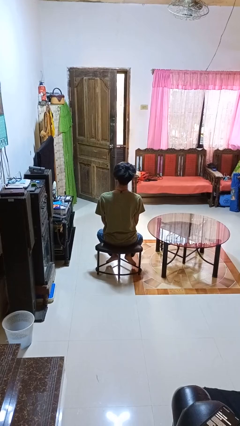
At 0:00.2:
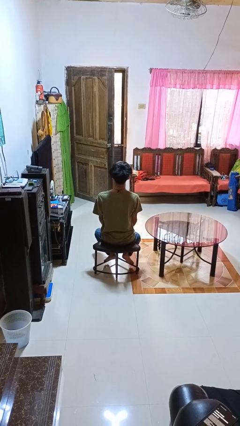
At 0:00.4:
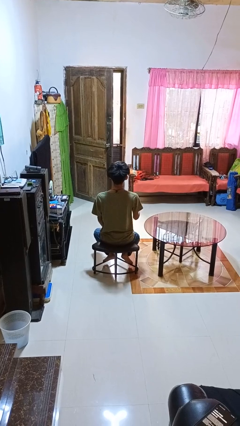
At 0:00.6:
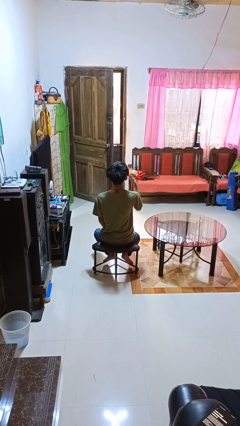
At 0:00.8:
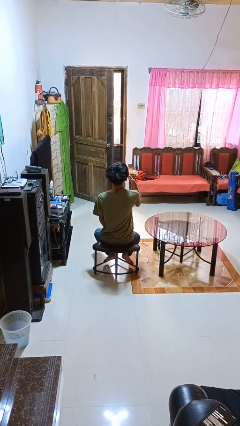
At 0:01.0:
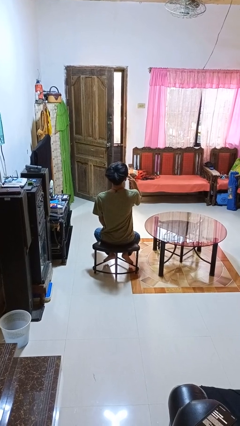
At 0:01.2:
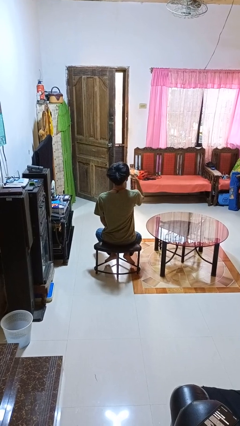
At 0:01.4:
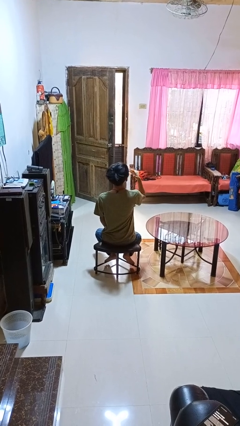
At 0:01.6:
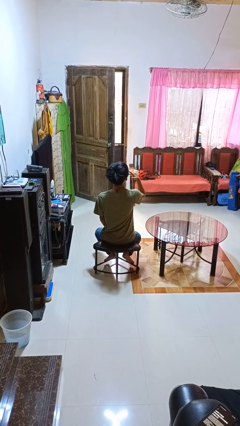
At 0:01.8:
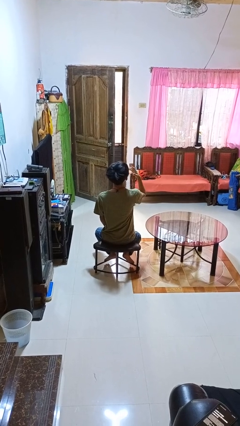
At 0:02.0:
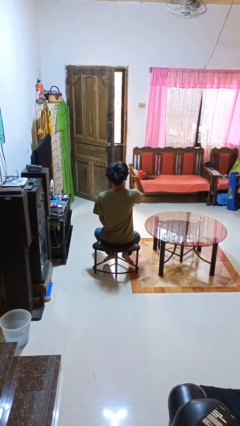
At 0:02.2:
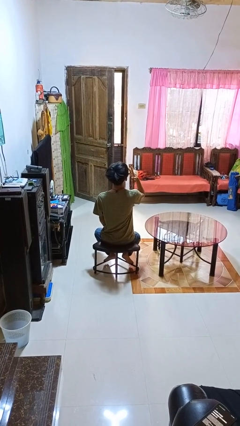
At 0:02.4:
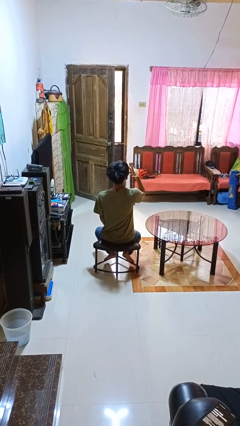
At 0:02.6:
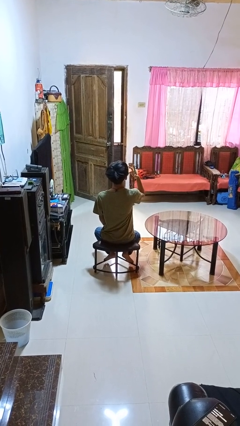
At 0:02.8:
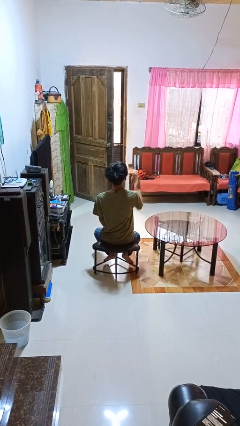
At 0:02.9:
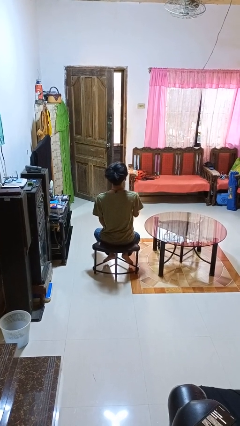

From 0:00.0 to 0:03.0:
person licks fingers

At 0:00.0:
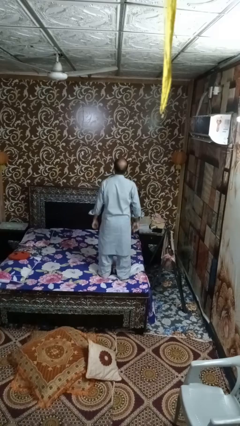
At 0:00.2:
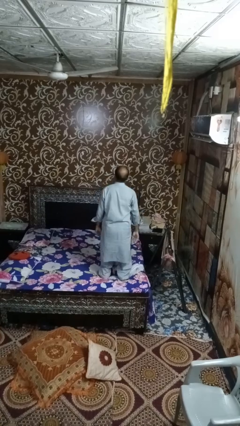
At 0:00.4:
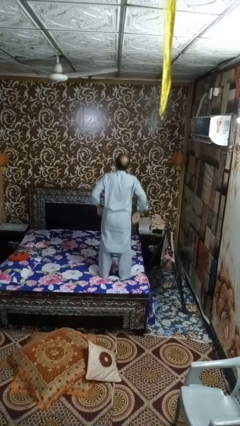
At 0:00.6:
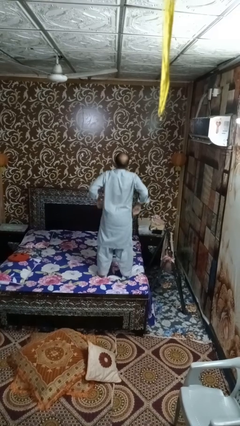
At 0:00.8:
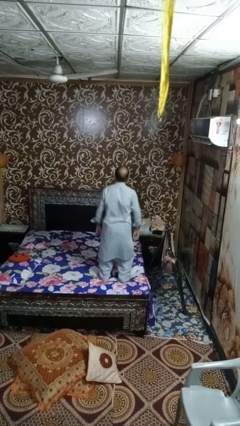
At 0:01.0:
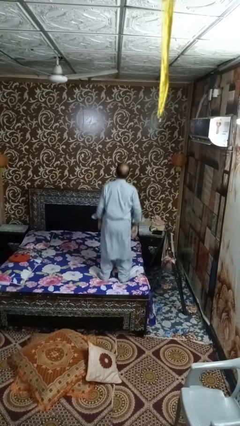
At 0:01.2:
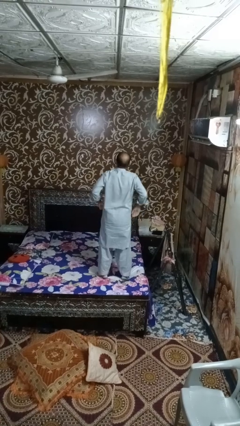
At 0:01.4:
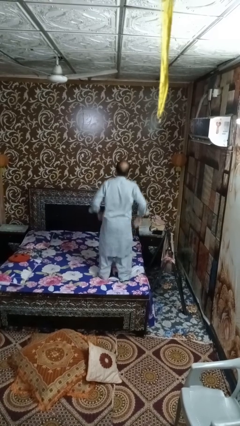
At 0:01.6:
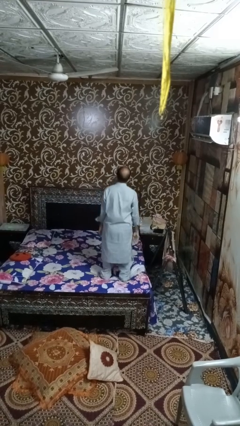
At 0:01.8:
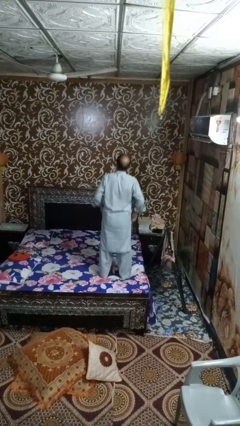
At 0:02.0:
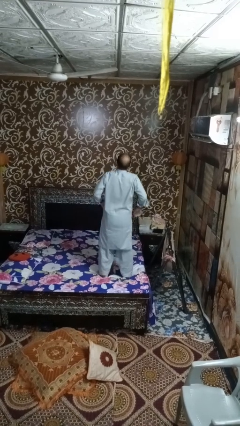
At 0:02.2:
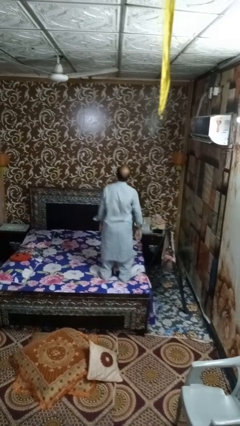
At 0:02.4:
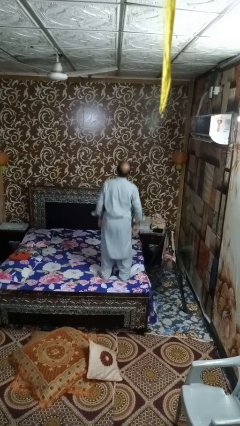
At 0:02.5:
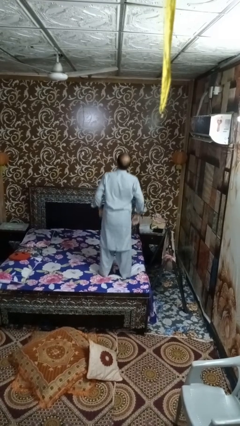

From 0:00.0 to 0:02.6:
person jumps on bed

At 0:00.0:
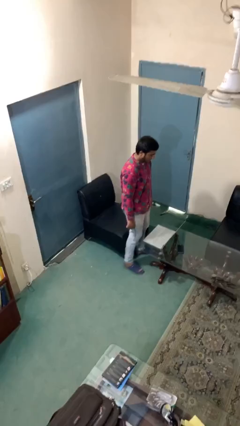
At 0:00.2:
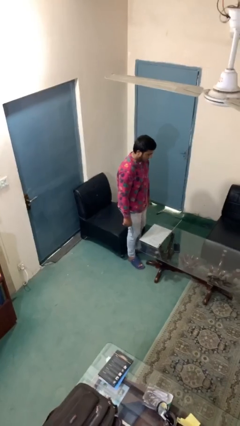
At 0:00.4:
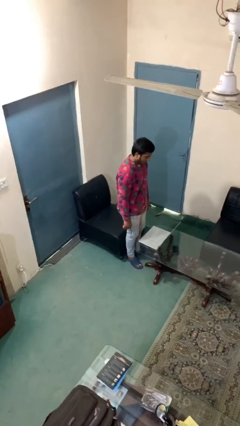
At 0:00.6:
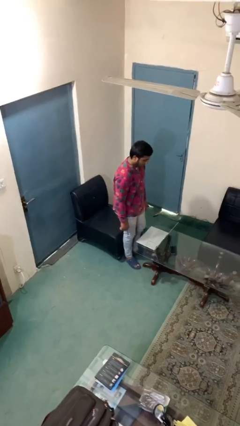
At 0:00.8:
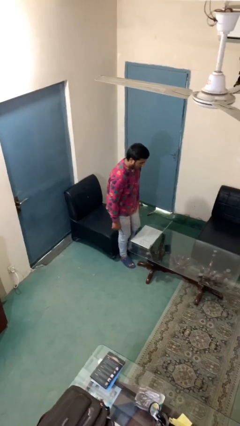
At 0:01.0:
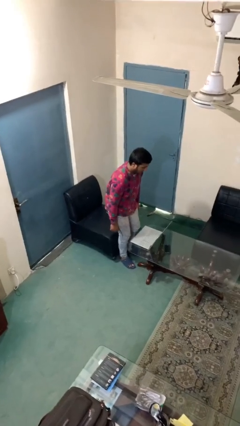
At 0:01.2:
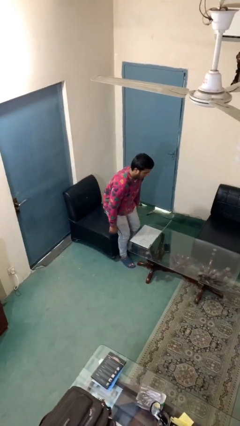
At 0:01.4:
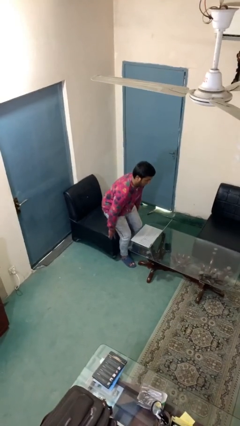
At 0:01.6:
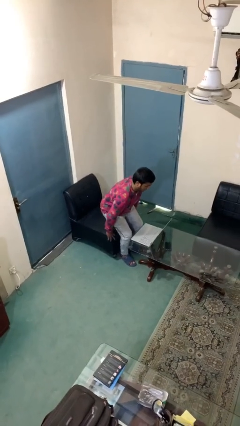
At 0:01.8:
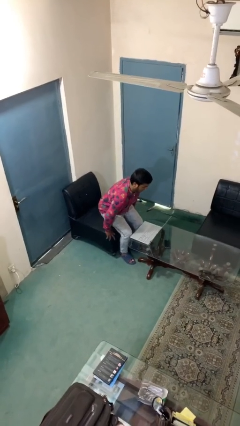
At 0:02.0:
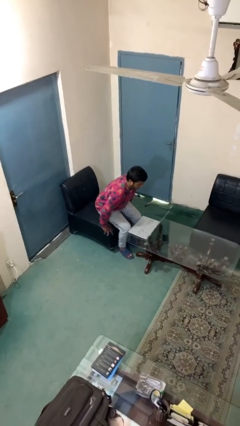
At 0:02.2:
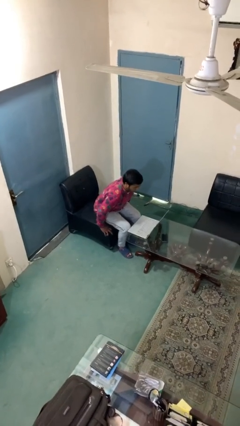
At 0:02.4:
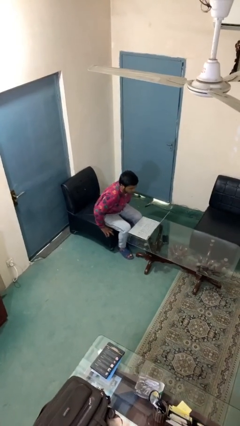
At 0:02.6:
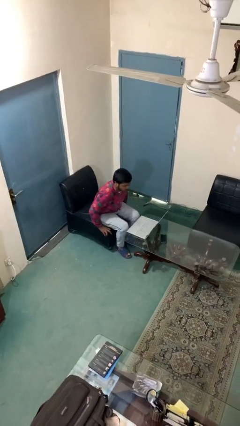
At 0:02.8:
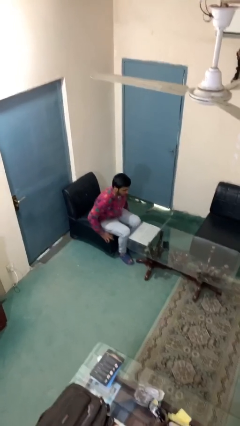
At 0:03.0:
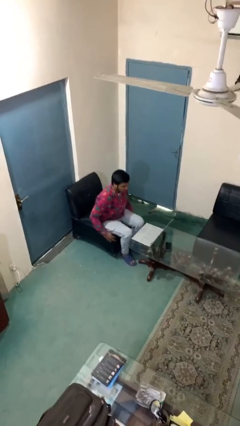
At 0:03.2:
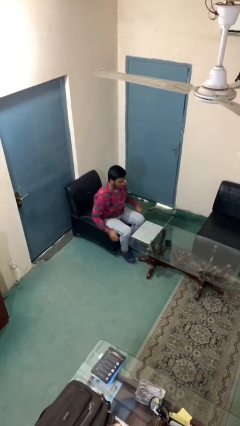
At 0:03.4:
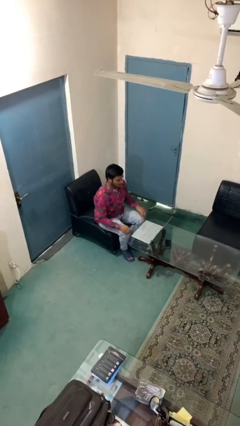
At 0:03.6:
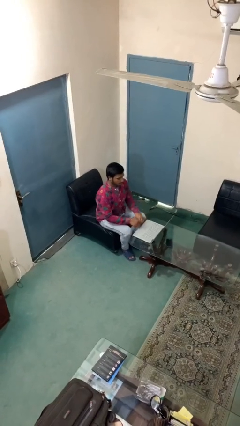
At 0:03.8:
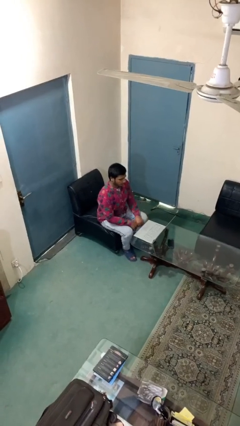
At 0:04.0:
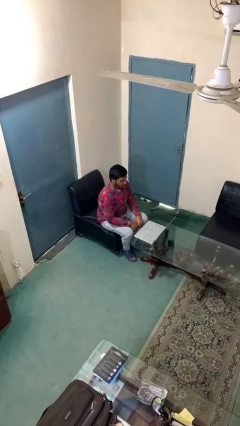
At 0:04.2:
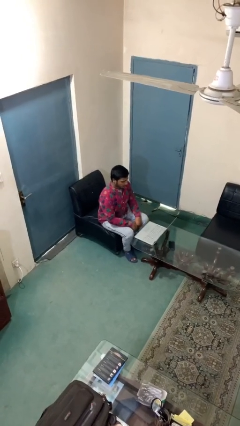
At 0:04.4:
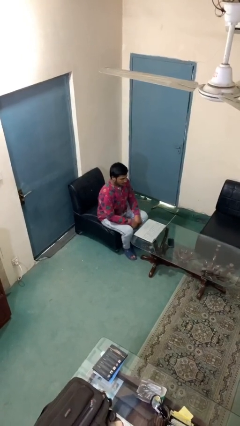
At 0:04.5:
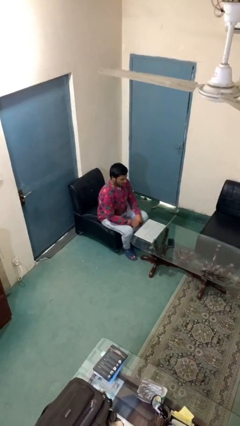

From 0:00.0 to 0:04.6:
person sits down

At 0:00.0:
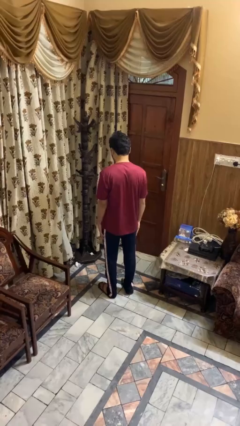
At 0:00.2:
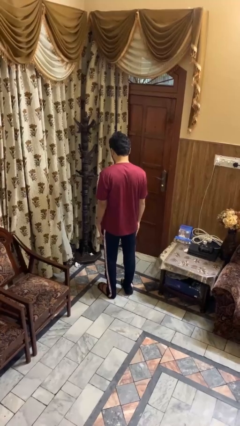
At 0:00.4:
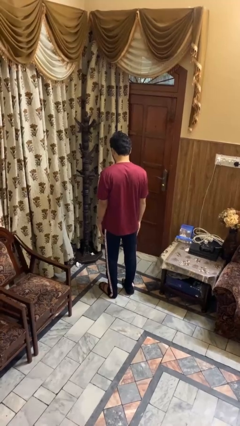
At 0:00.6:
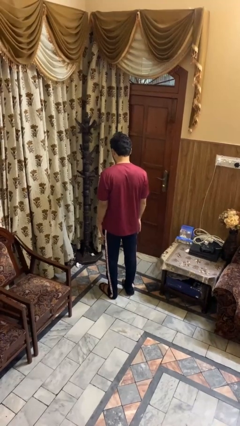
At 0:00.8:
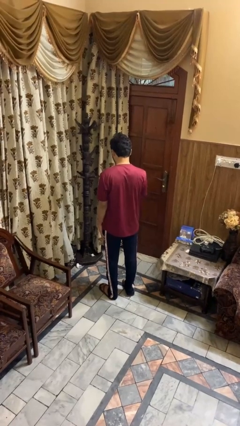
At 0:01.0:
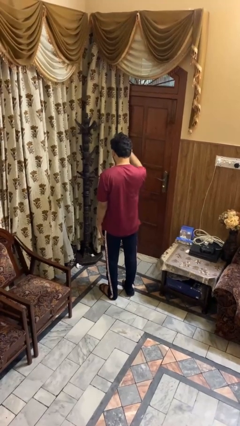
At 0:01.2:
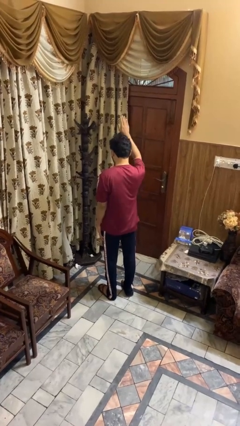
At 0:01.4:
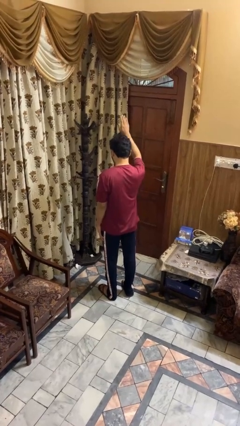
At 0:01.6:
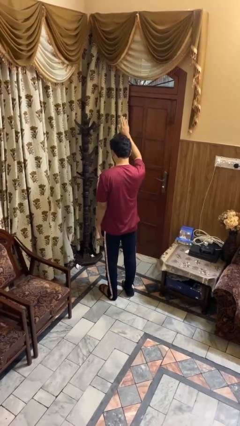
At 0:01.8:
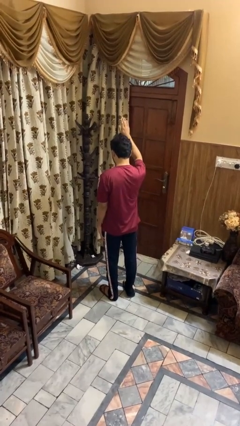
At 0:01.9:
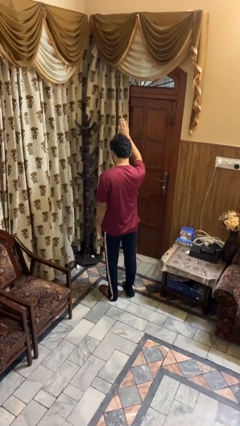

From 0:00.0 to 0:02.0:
person gestures raise hand

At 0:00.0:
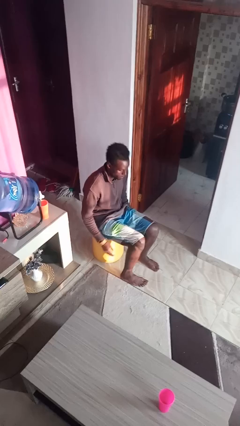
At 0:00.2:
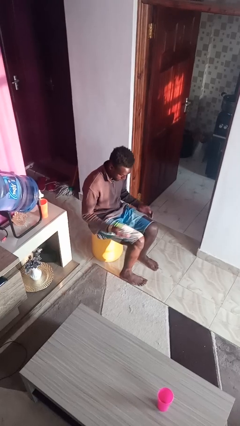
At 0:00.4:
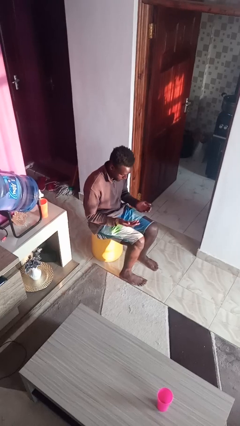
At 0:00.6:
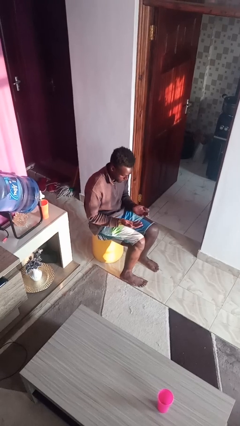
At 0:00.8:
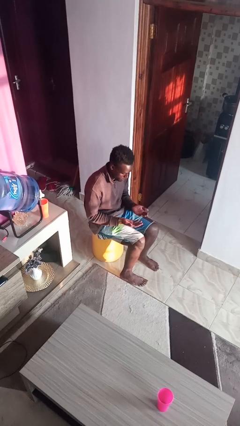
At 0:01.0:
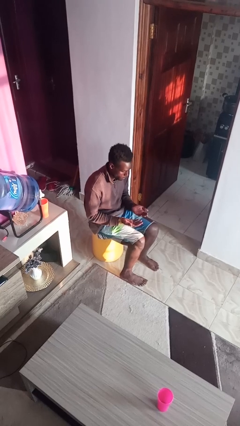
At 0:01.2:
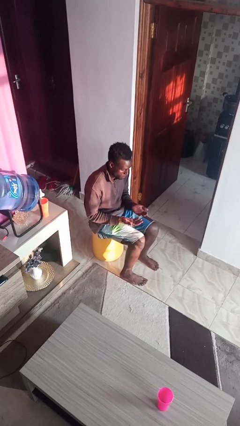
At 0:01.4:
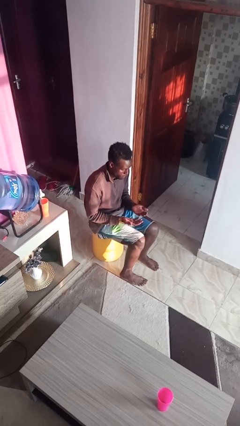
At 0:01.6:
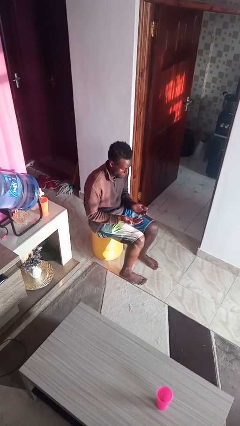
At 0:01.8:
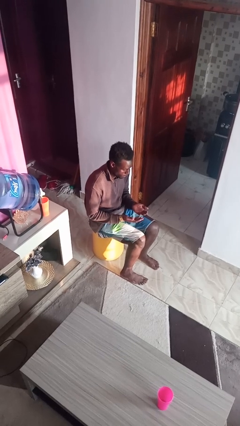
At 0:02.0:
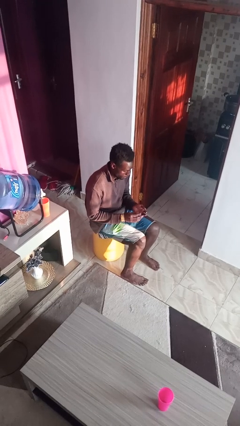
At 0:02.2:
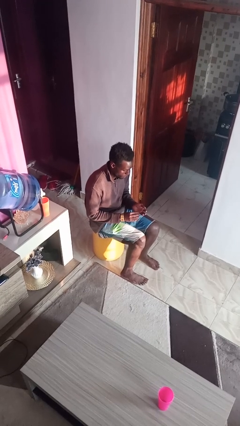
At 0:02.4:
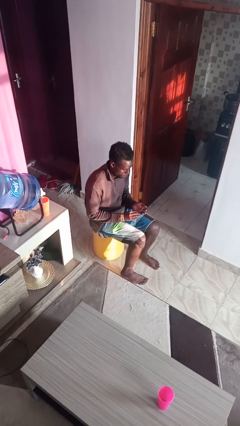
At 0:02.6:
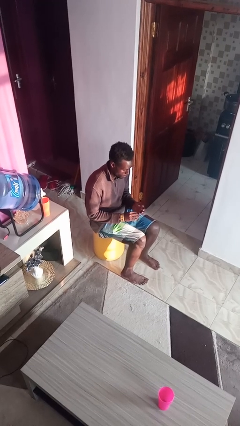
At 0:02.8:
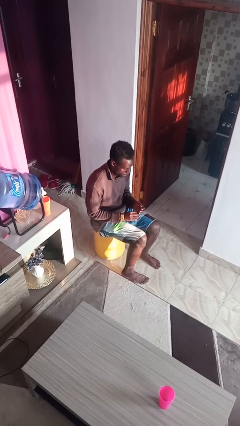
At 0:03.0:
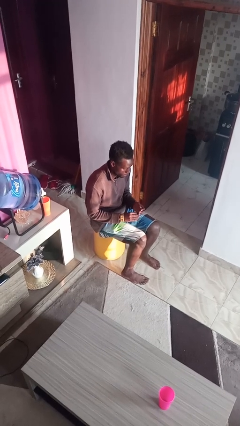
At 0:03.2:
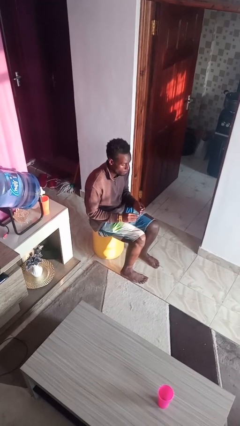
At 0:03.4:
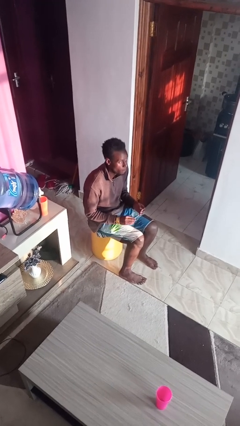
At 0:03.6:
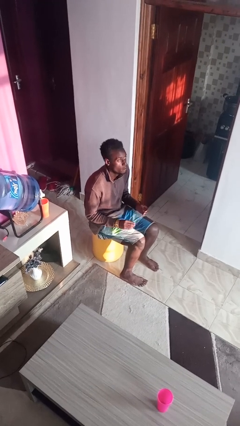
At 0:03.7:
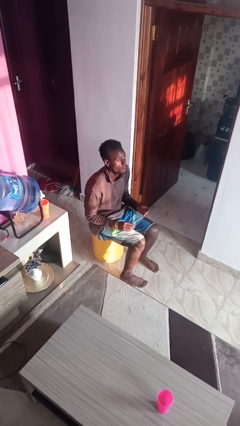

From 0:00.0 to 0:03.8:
person looks at hands in lap

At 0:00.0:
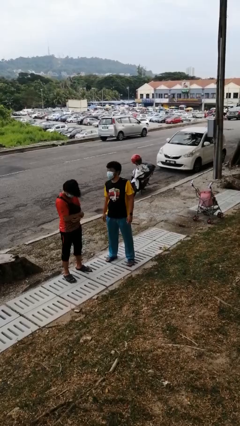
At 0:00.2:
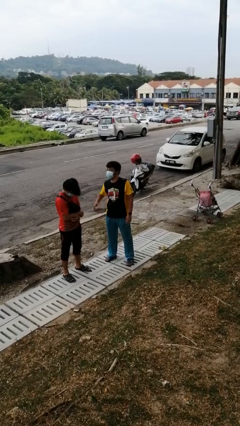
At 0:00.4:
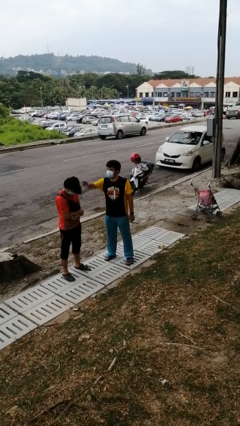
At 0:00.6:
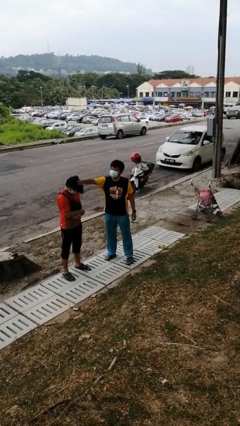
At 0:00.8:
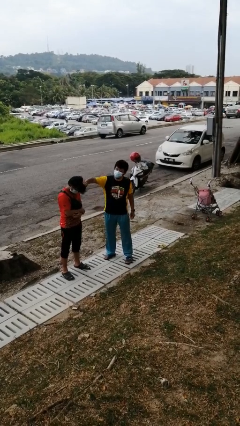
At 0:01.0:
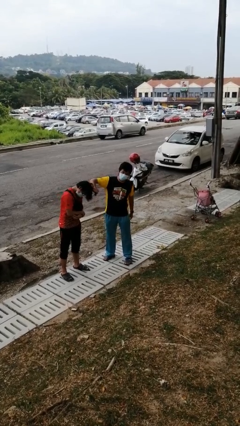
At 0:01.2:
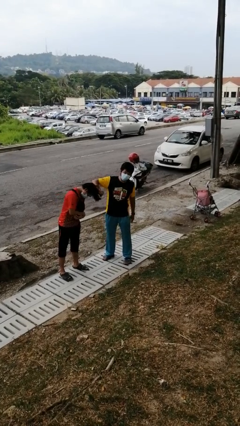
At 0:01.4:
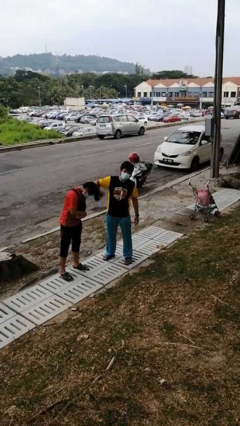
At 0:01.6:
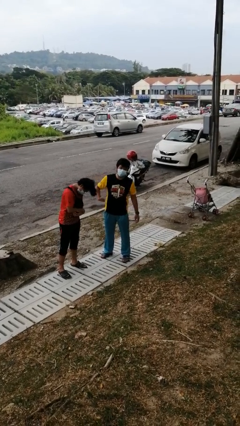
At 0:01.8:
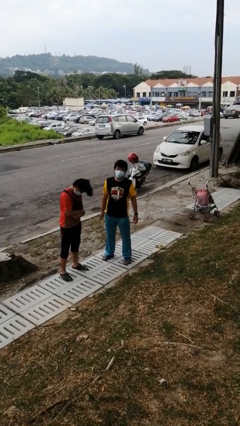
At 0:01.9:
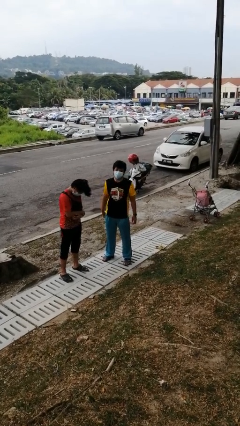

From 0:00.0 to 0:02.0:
person grabs person by hair
